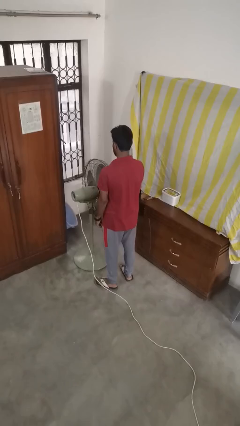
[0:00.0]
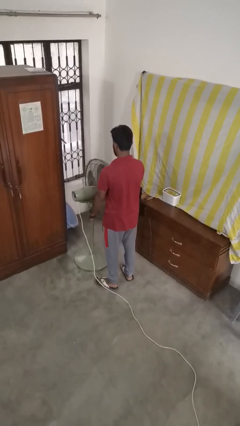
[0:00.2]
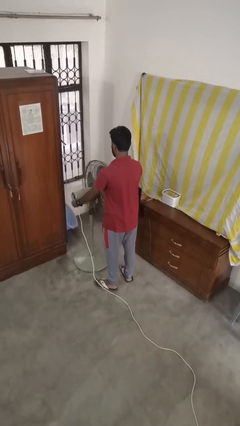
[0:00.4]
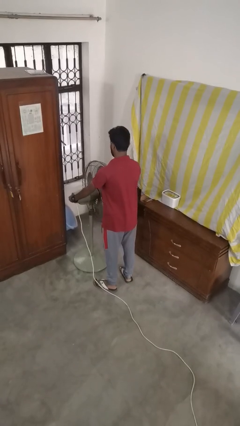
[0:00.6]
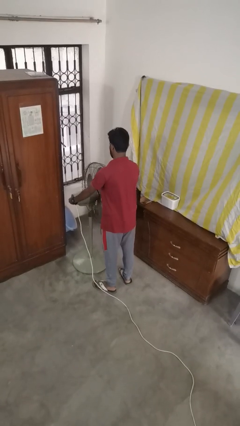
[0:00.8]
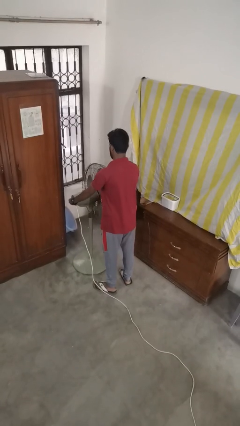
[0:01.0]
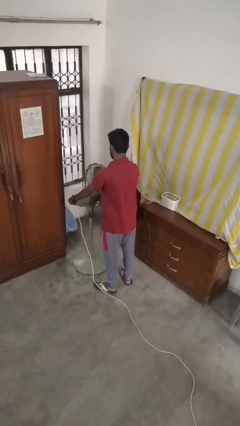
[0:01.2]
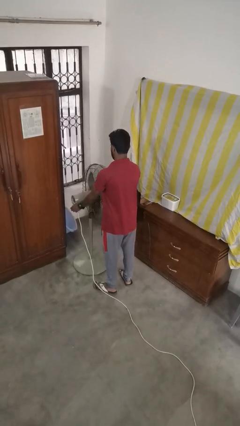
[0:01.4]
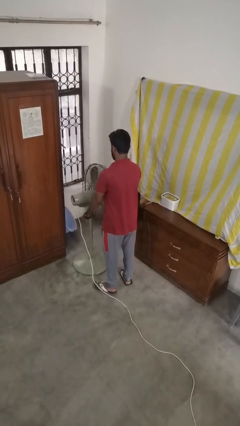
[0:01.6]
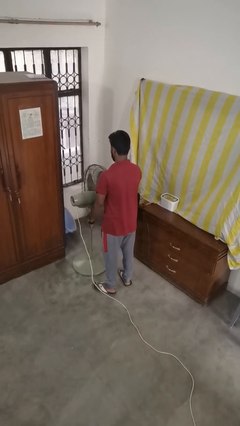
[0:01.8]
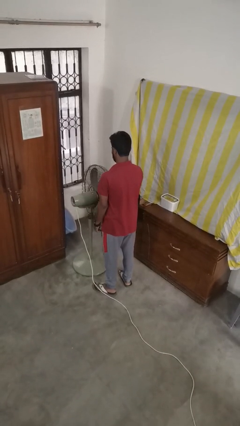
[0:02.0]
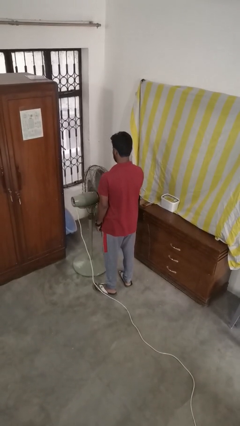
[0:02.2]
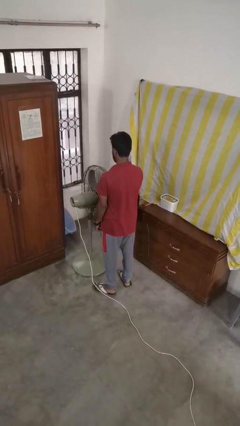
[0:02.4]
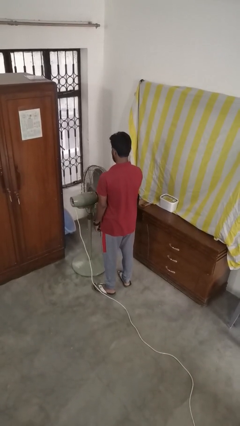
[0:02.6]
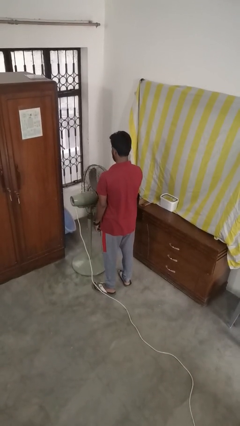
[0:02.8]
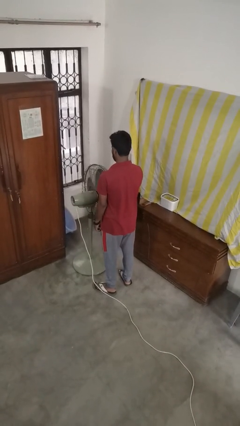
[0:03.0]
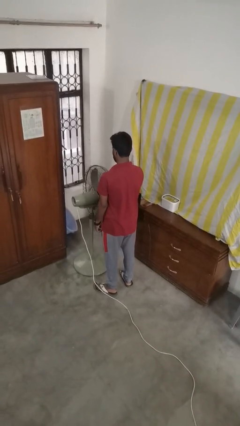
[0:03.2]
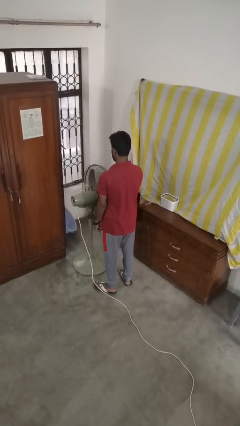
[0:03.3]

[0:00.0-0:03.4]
person turns on fan

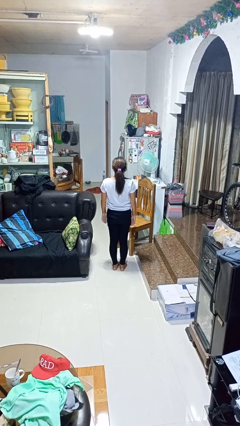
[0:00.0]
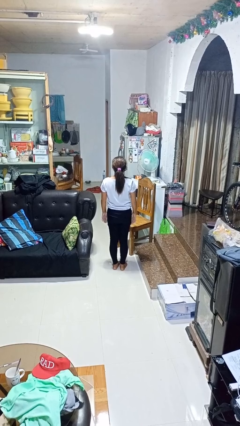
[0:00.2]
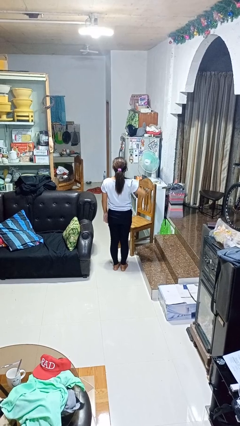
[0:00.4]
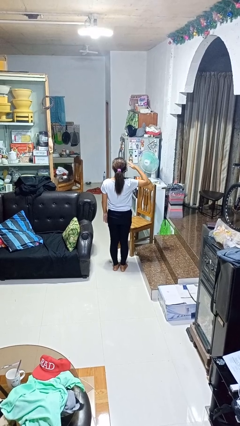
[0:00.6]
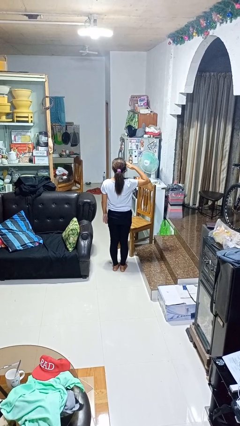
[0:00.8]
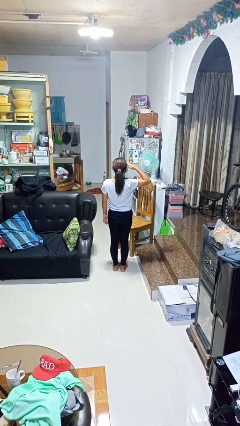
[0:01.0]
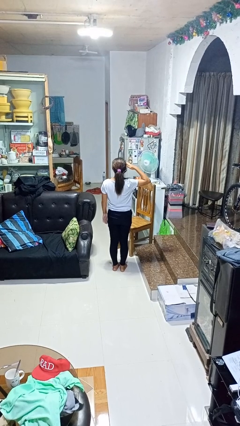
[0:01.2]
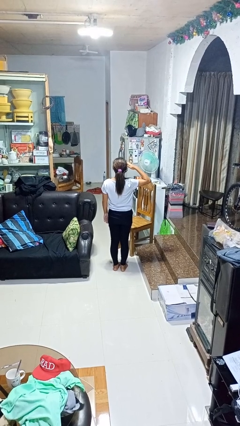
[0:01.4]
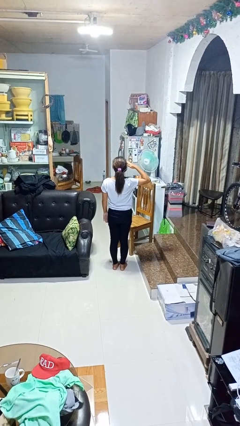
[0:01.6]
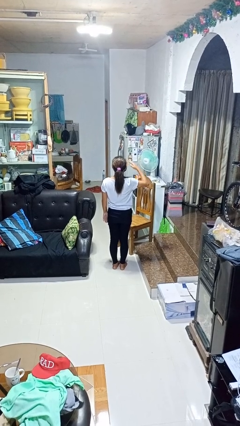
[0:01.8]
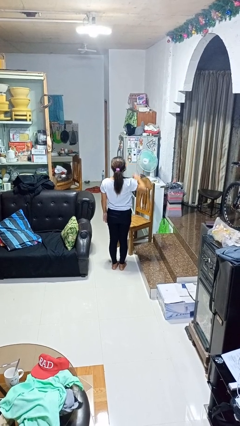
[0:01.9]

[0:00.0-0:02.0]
person salutes

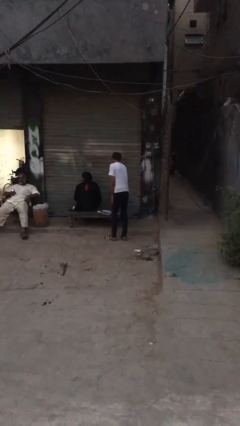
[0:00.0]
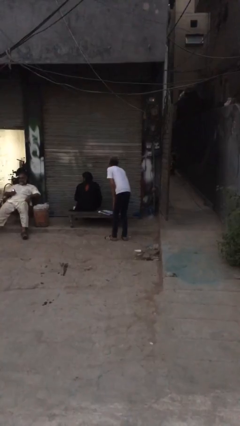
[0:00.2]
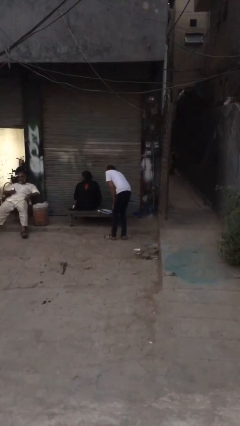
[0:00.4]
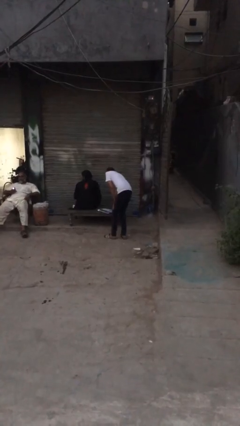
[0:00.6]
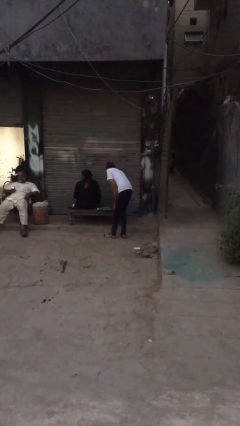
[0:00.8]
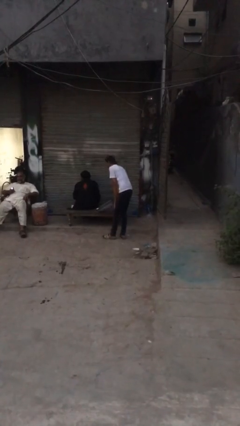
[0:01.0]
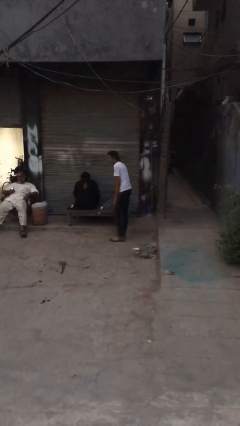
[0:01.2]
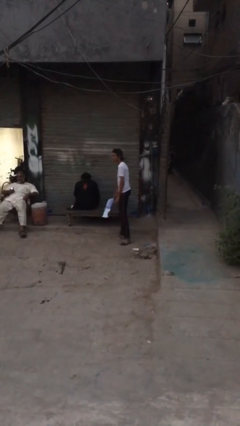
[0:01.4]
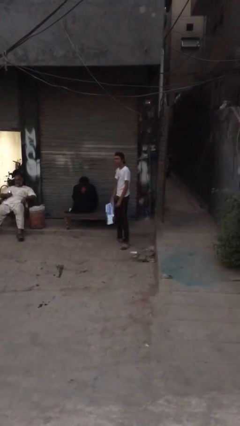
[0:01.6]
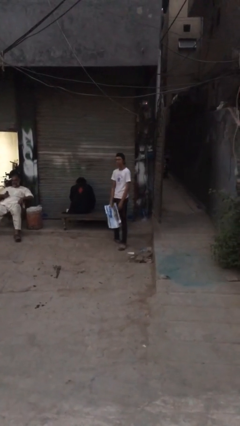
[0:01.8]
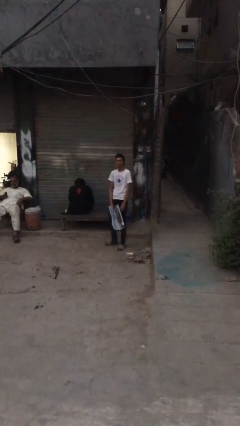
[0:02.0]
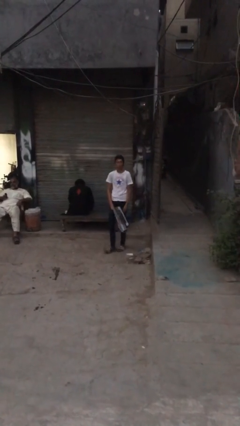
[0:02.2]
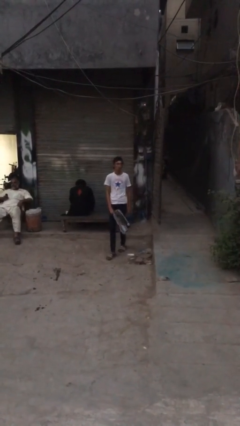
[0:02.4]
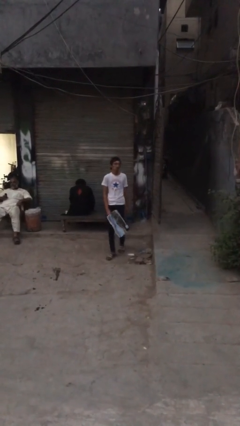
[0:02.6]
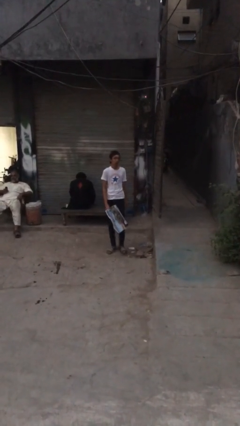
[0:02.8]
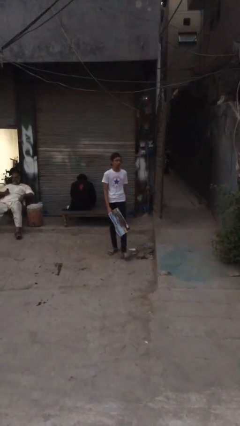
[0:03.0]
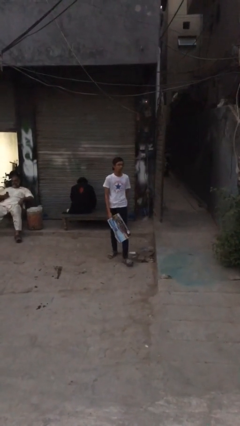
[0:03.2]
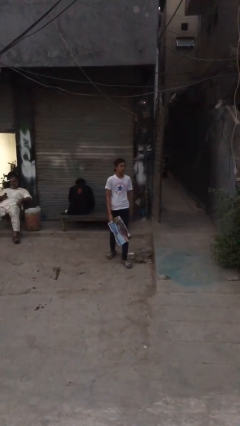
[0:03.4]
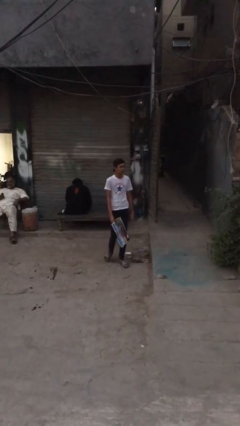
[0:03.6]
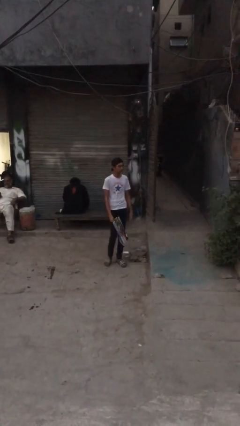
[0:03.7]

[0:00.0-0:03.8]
person steals object from person

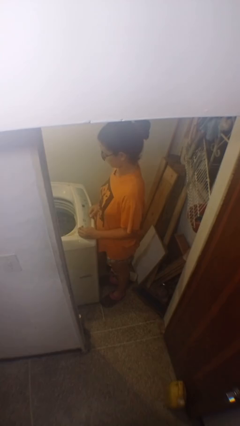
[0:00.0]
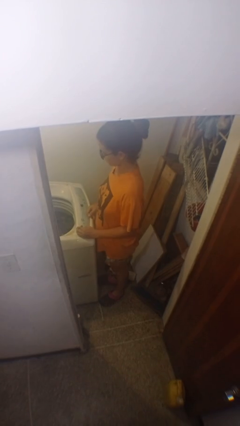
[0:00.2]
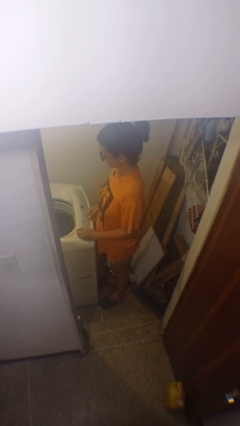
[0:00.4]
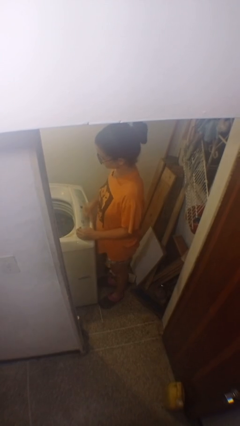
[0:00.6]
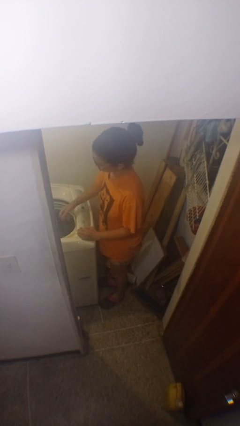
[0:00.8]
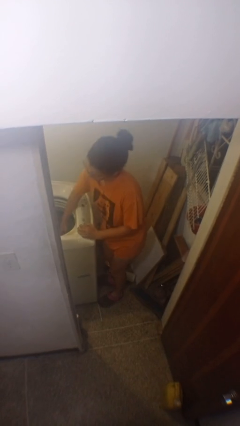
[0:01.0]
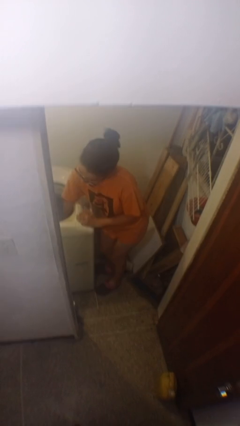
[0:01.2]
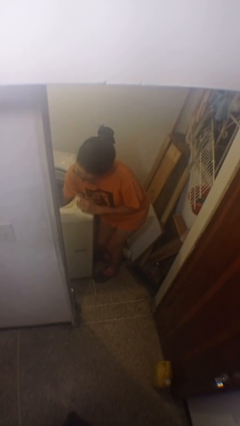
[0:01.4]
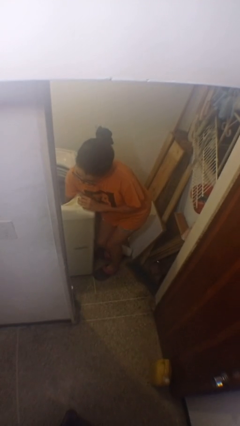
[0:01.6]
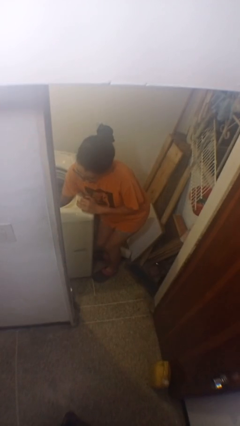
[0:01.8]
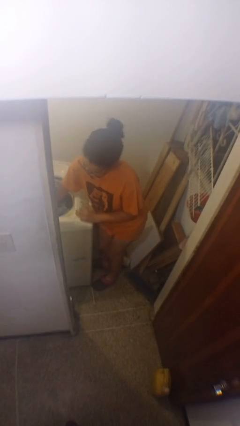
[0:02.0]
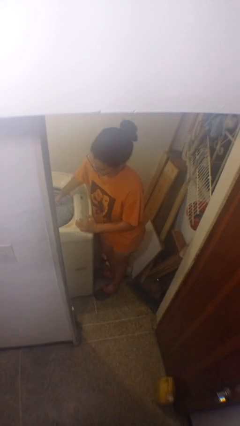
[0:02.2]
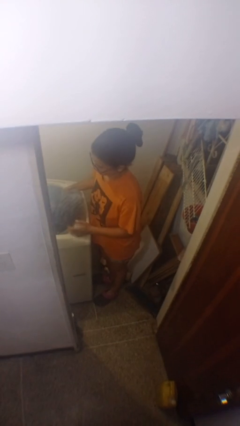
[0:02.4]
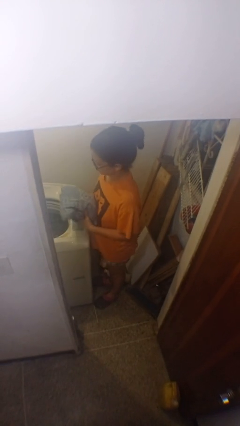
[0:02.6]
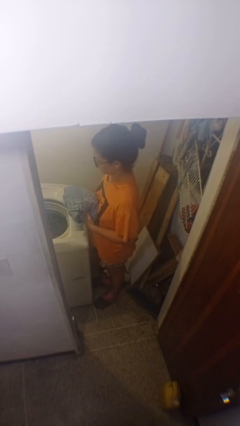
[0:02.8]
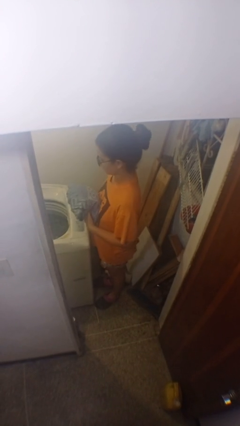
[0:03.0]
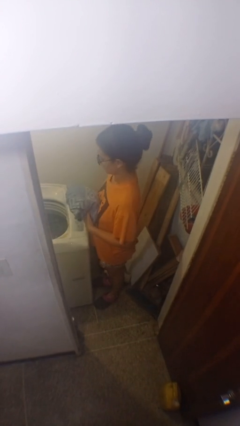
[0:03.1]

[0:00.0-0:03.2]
person unloads clotheswasher

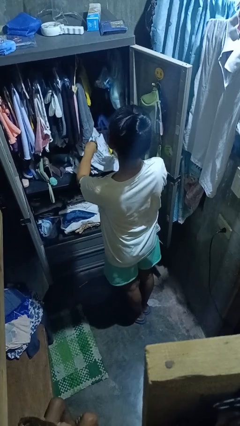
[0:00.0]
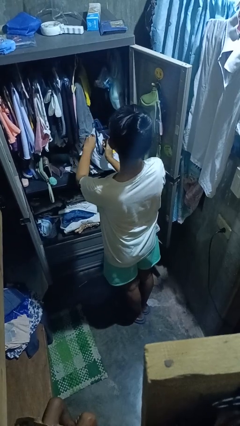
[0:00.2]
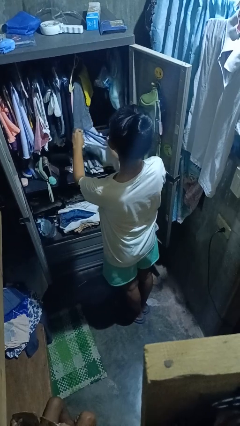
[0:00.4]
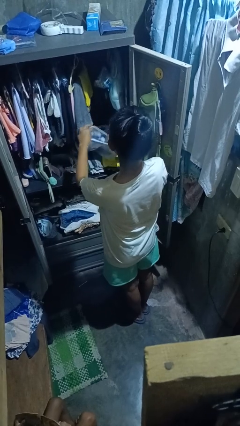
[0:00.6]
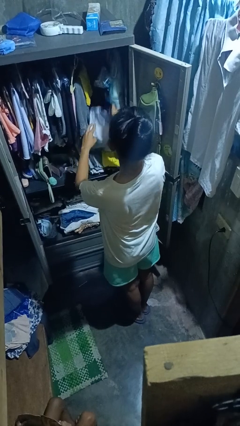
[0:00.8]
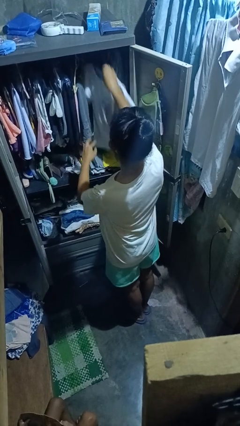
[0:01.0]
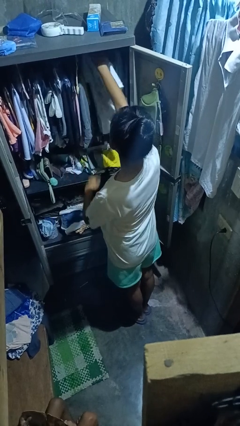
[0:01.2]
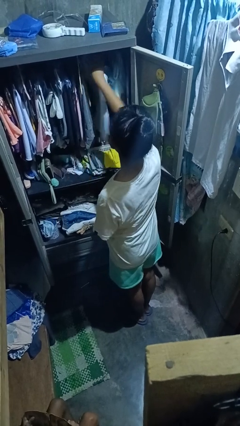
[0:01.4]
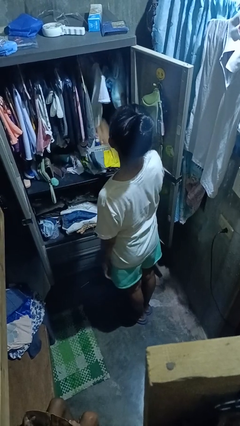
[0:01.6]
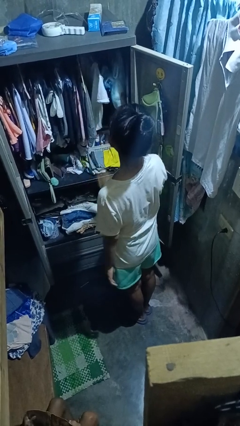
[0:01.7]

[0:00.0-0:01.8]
person puts clothes into closet

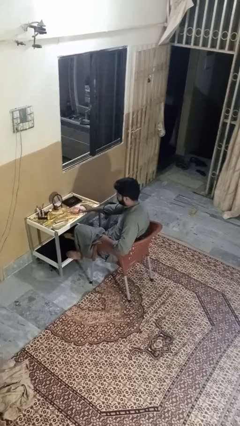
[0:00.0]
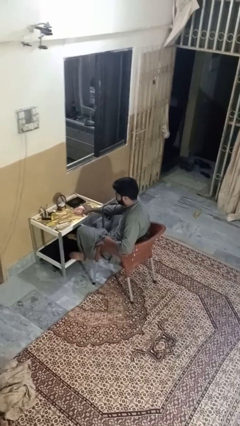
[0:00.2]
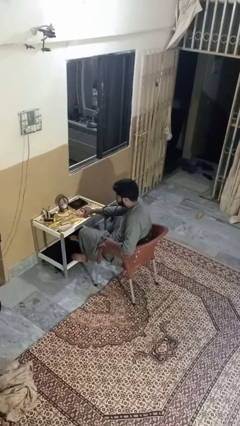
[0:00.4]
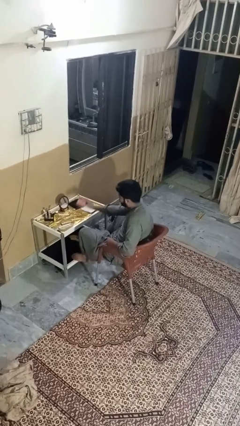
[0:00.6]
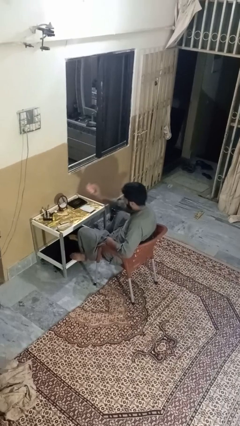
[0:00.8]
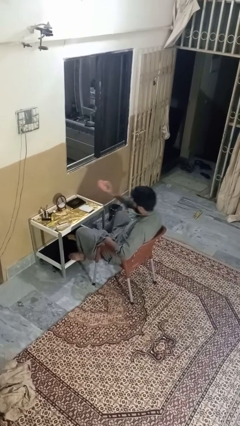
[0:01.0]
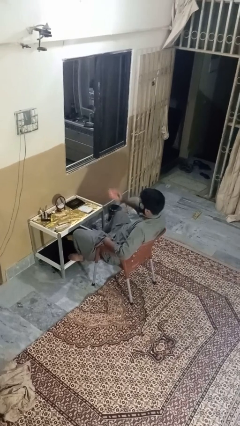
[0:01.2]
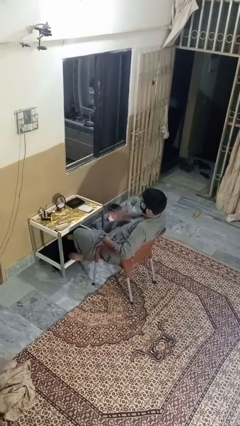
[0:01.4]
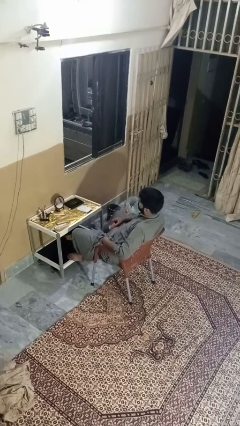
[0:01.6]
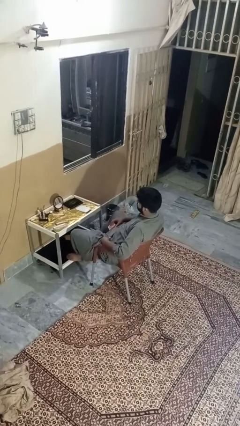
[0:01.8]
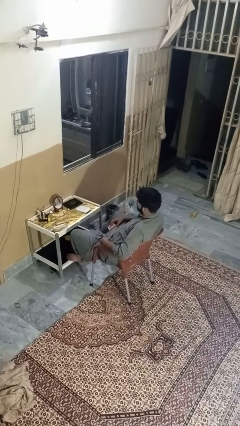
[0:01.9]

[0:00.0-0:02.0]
person picks up object from table

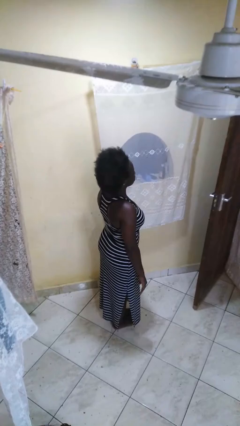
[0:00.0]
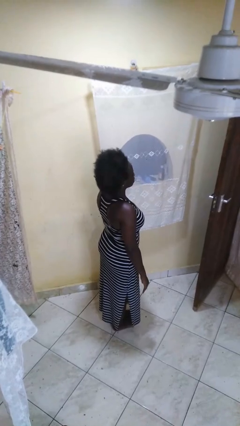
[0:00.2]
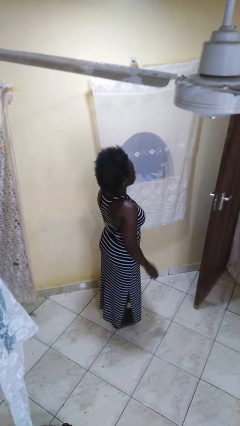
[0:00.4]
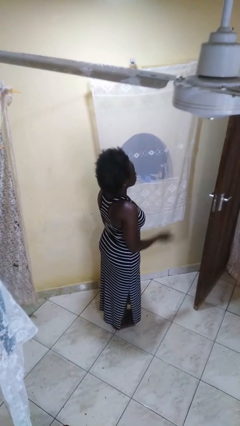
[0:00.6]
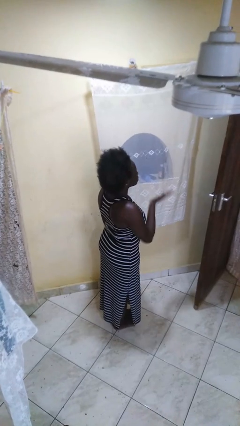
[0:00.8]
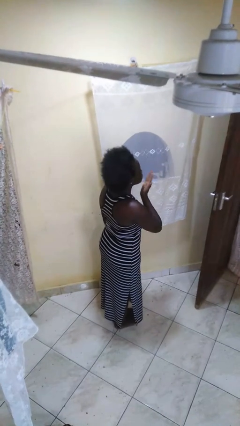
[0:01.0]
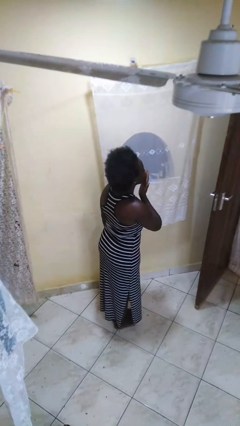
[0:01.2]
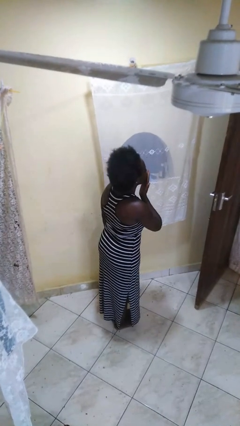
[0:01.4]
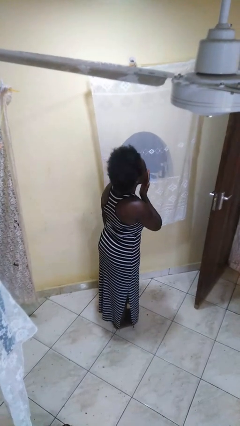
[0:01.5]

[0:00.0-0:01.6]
person gestures blow kiss
